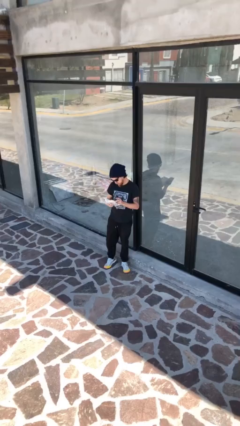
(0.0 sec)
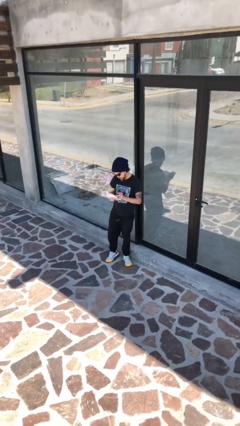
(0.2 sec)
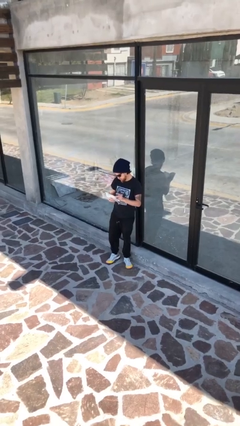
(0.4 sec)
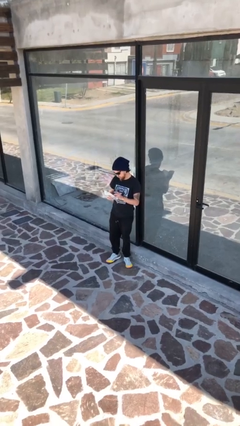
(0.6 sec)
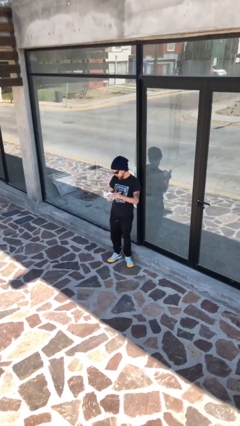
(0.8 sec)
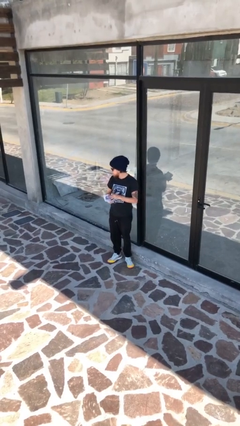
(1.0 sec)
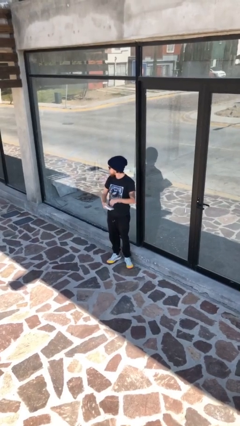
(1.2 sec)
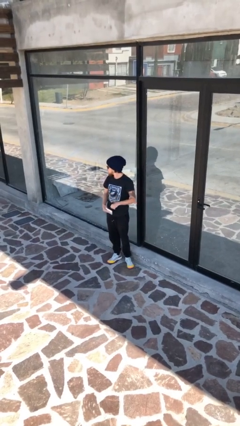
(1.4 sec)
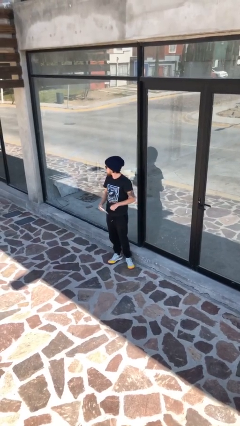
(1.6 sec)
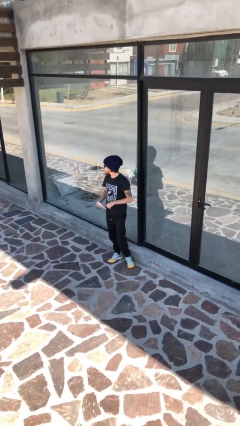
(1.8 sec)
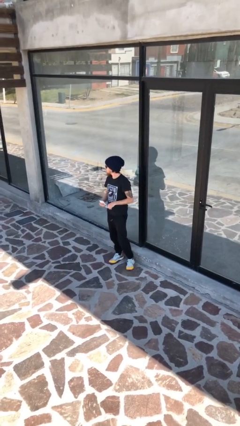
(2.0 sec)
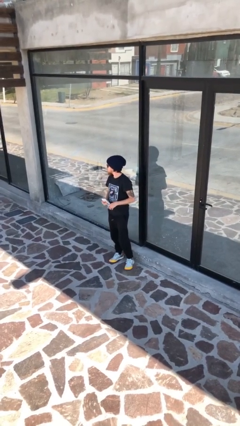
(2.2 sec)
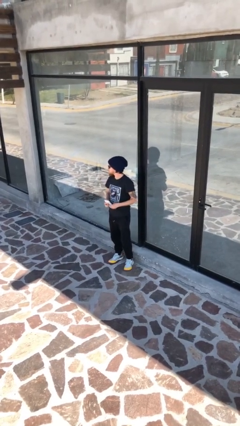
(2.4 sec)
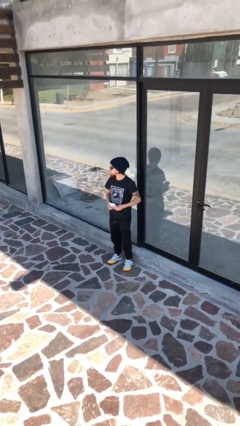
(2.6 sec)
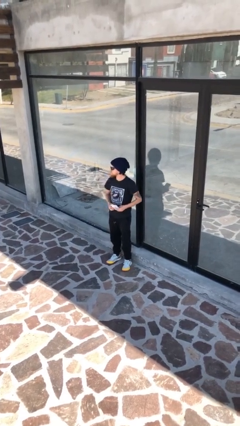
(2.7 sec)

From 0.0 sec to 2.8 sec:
person reads document

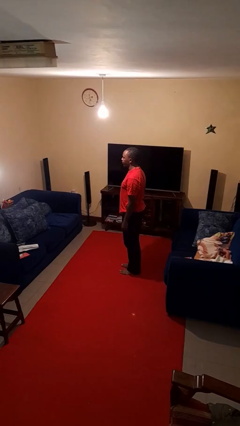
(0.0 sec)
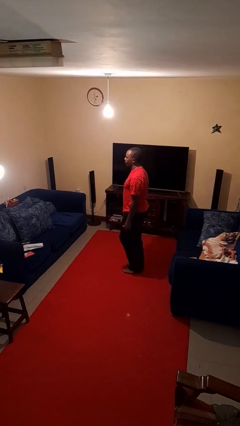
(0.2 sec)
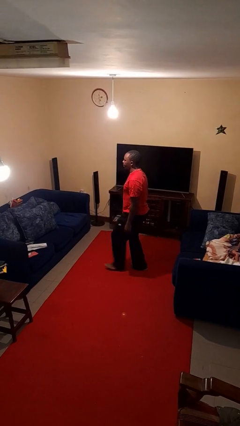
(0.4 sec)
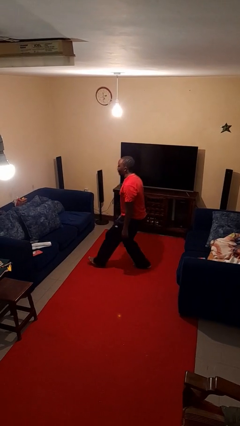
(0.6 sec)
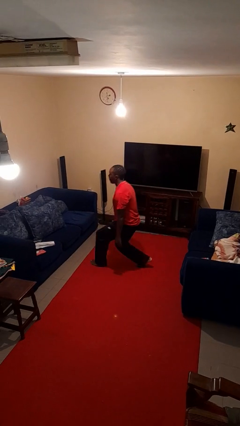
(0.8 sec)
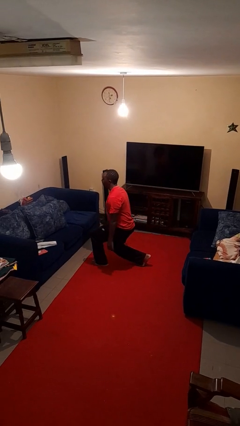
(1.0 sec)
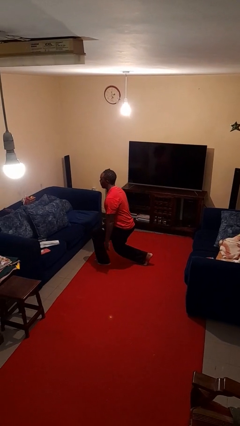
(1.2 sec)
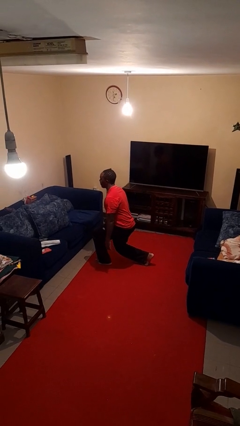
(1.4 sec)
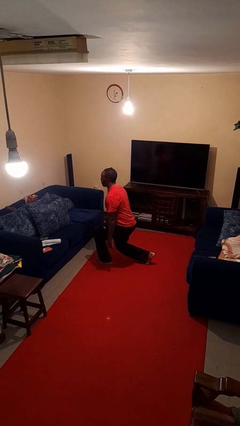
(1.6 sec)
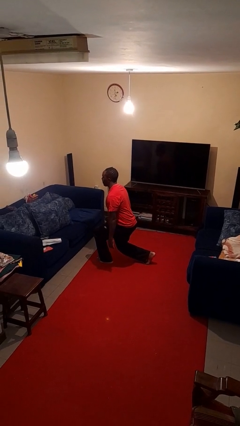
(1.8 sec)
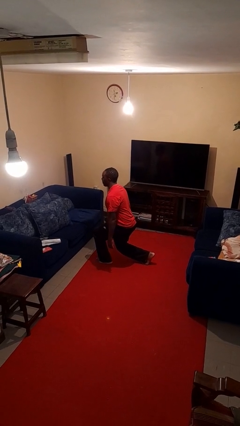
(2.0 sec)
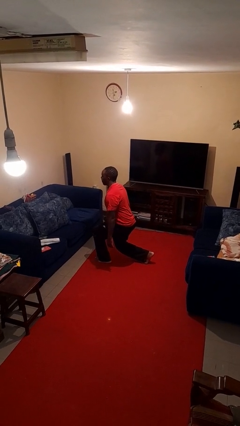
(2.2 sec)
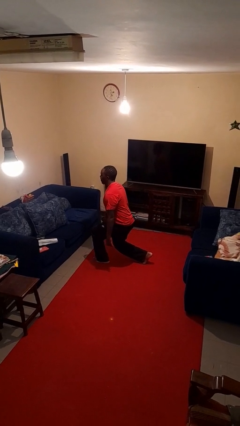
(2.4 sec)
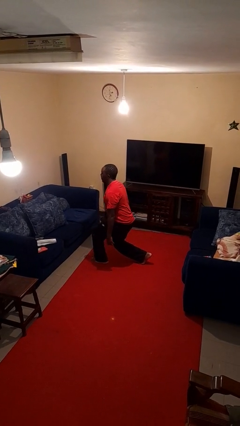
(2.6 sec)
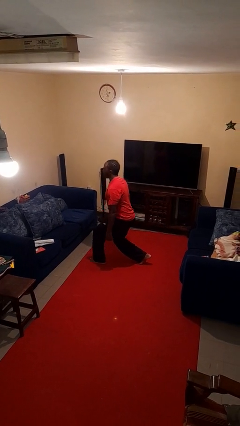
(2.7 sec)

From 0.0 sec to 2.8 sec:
person exercises with lunges

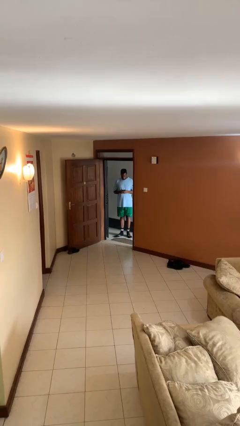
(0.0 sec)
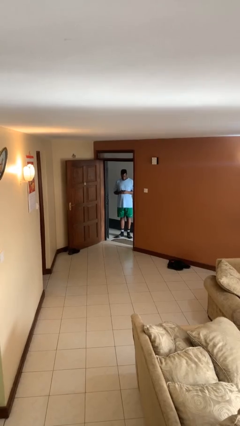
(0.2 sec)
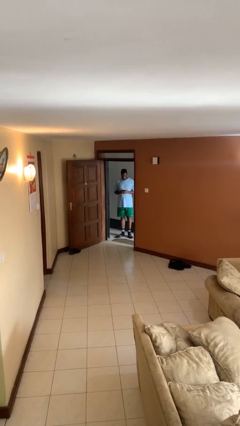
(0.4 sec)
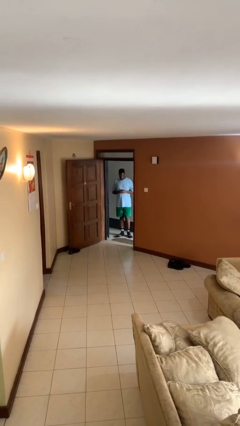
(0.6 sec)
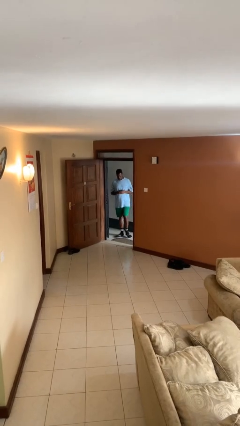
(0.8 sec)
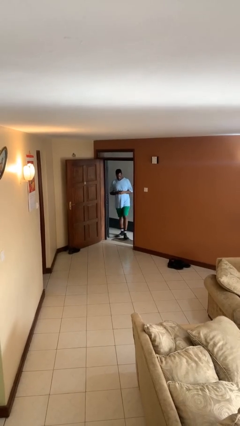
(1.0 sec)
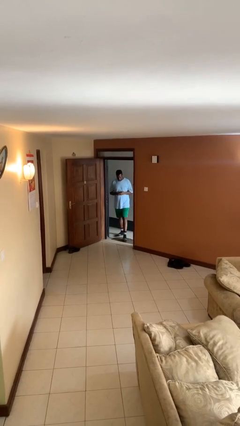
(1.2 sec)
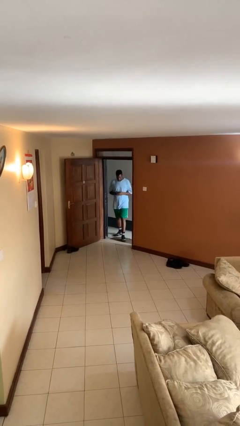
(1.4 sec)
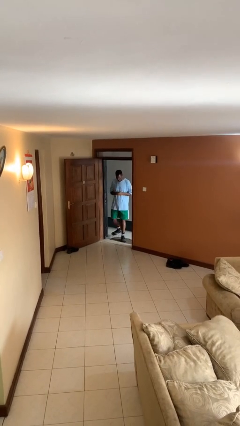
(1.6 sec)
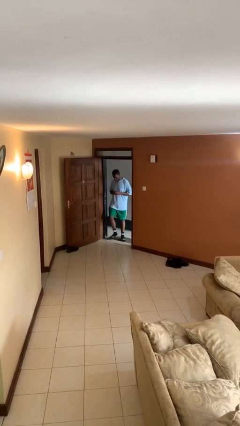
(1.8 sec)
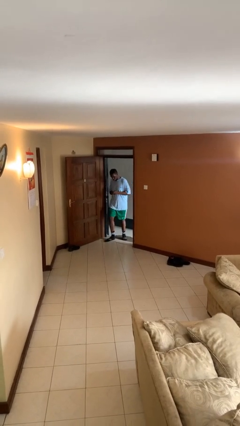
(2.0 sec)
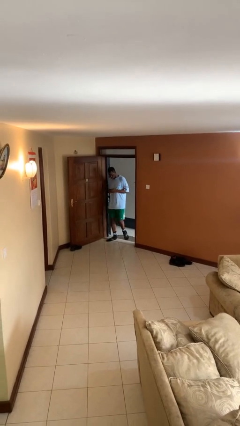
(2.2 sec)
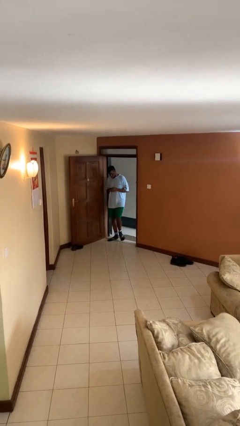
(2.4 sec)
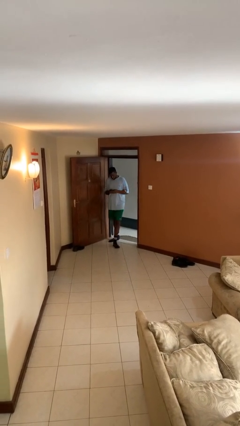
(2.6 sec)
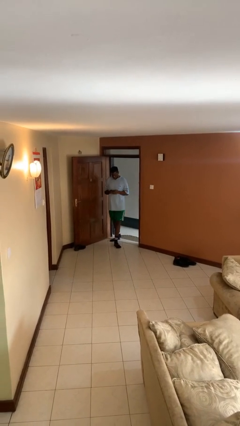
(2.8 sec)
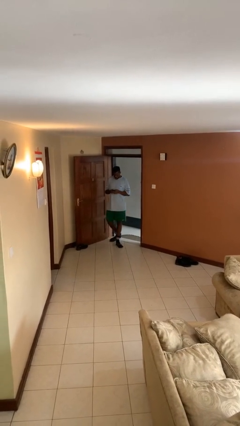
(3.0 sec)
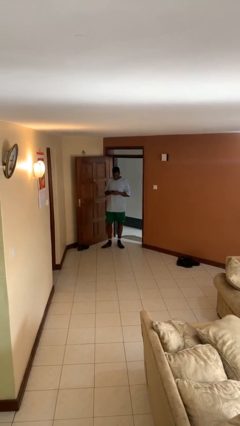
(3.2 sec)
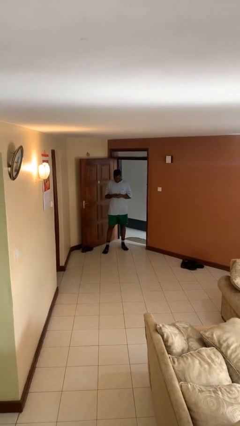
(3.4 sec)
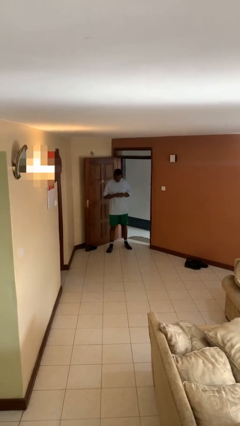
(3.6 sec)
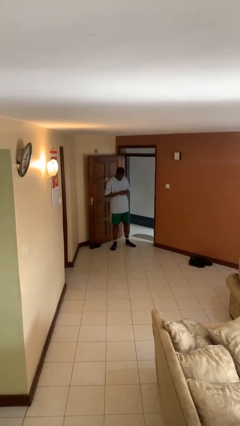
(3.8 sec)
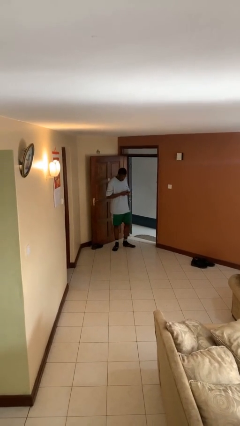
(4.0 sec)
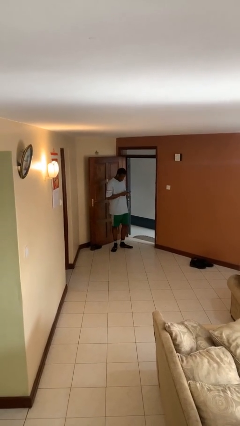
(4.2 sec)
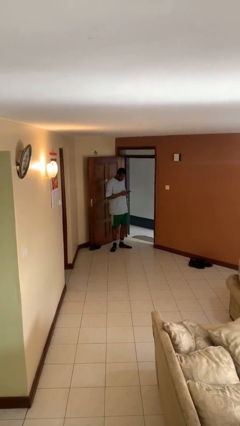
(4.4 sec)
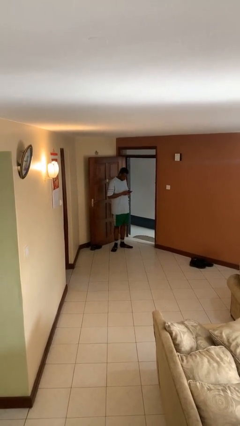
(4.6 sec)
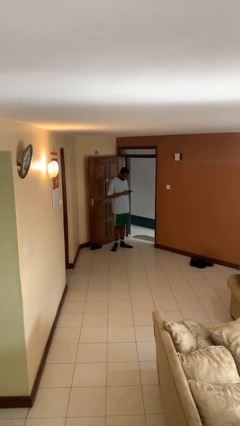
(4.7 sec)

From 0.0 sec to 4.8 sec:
person enters scene through structure

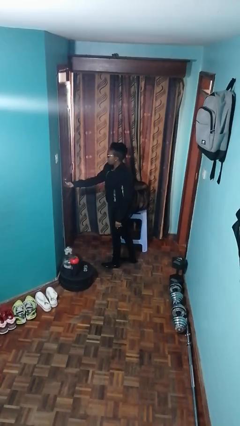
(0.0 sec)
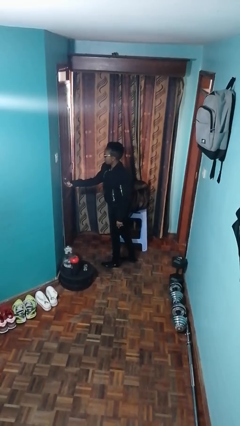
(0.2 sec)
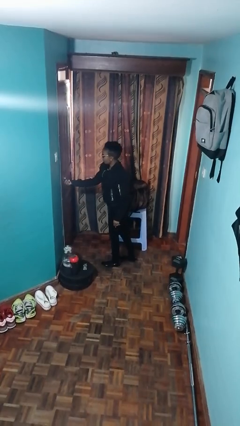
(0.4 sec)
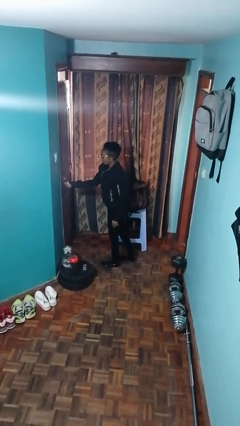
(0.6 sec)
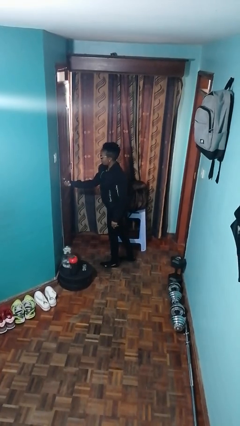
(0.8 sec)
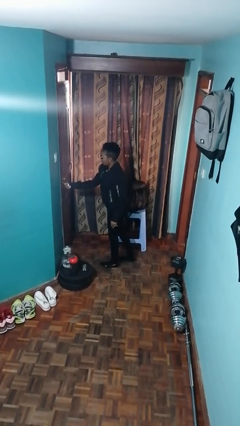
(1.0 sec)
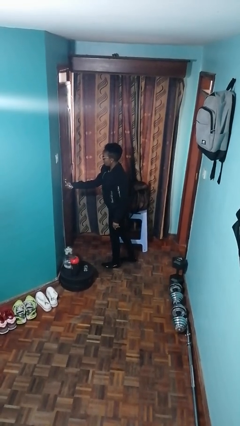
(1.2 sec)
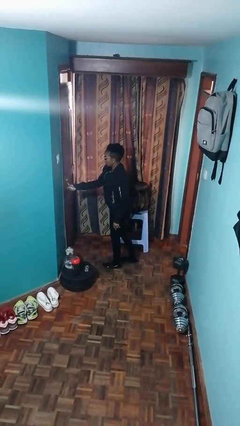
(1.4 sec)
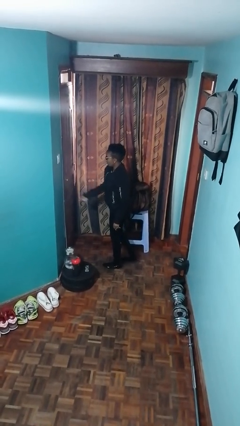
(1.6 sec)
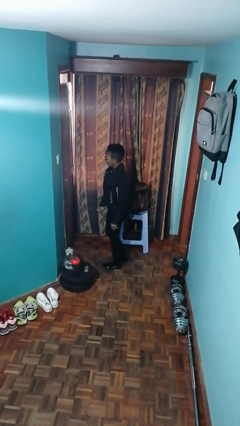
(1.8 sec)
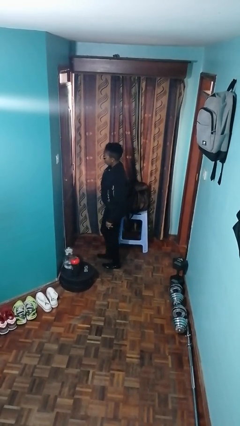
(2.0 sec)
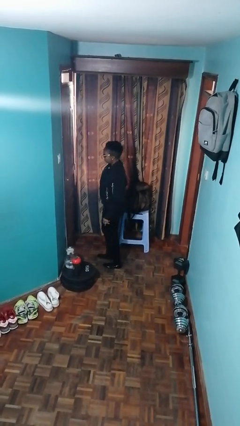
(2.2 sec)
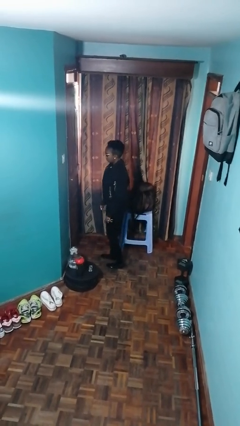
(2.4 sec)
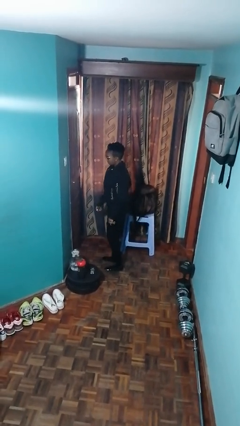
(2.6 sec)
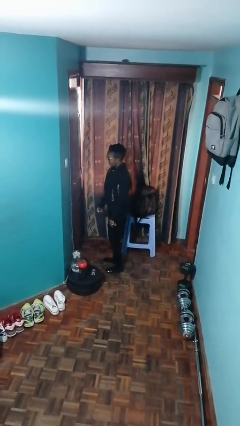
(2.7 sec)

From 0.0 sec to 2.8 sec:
person locks door with keys

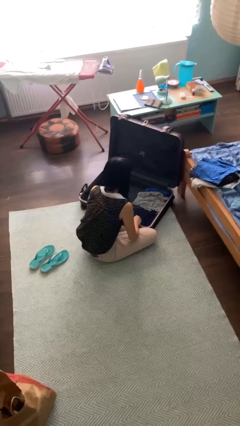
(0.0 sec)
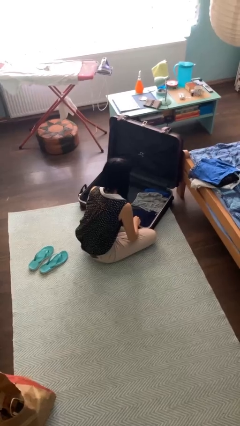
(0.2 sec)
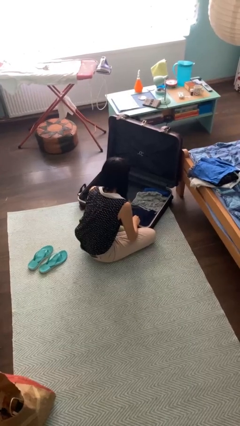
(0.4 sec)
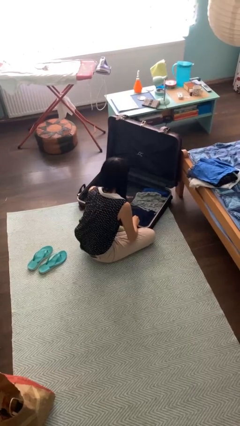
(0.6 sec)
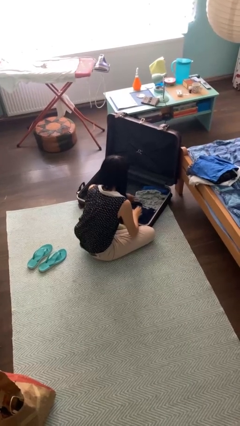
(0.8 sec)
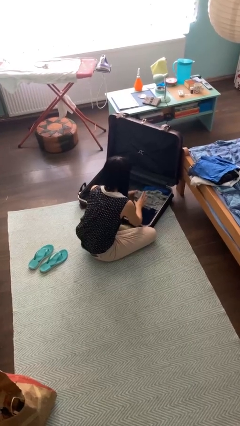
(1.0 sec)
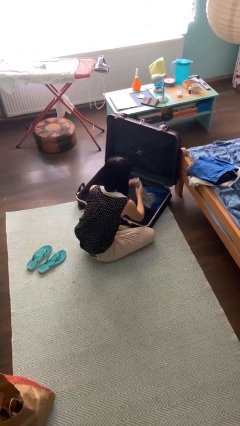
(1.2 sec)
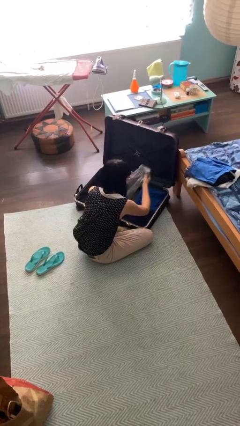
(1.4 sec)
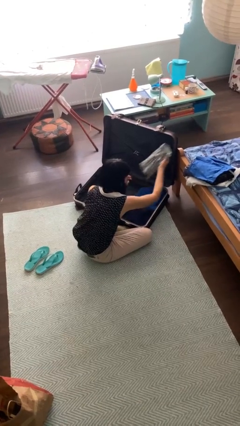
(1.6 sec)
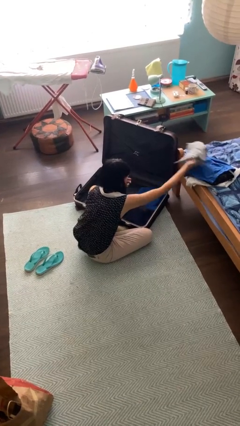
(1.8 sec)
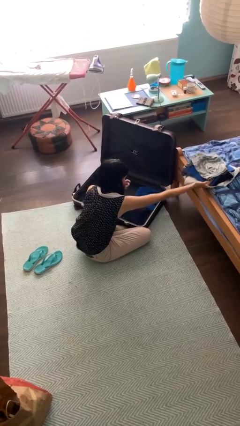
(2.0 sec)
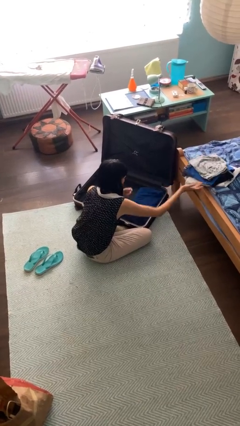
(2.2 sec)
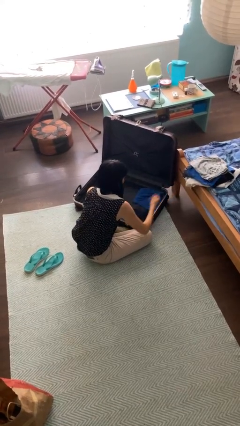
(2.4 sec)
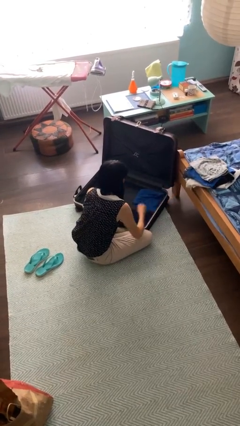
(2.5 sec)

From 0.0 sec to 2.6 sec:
person unloads clothes from suitcase

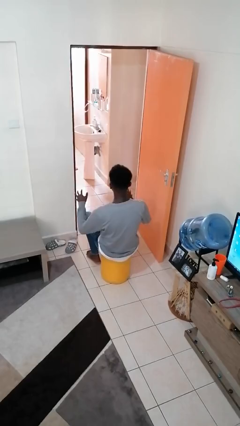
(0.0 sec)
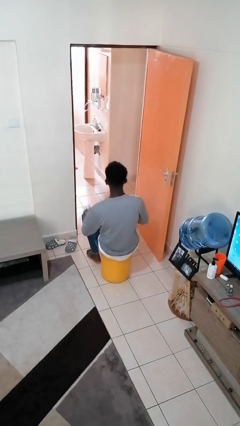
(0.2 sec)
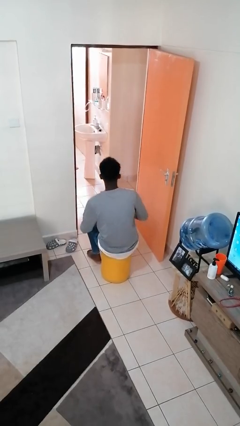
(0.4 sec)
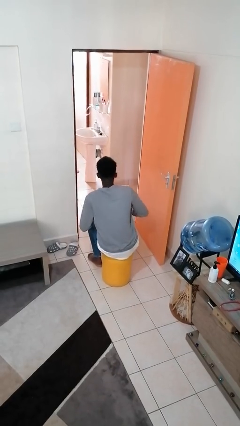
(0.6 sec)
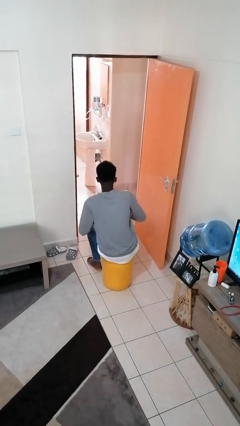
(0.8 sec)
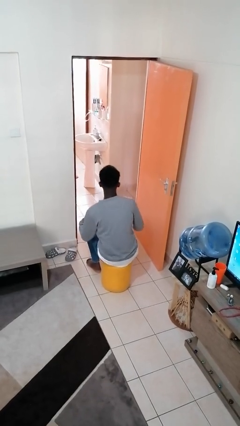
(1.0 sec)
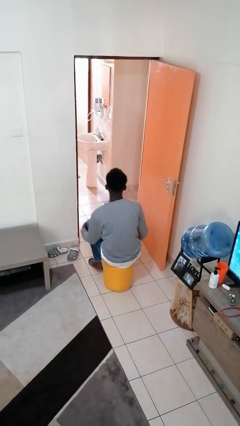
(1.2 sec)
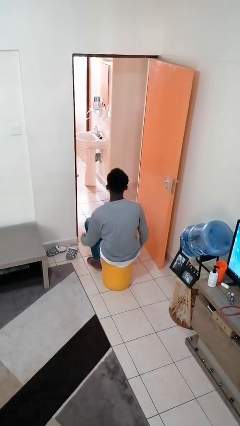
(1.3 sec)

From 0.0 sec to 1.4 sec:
person slaps hands on thighs
